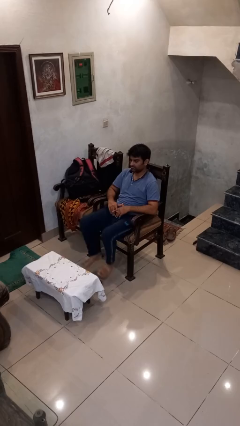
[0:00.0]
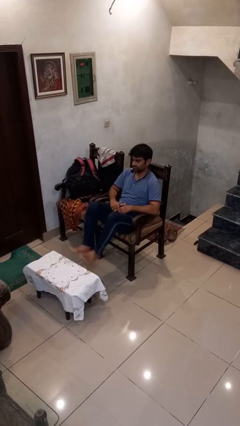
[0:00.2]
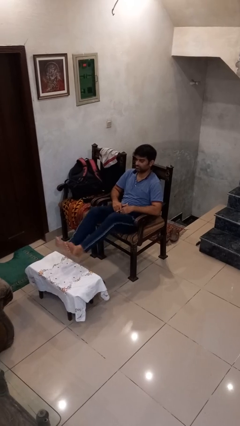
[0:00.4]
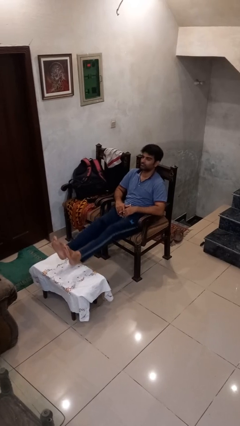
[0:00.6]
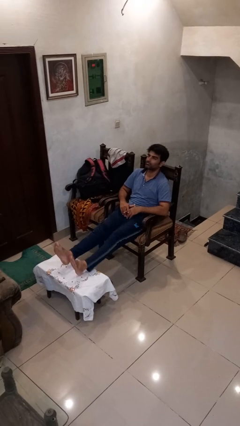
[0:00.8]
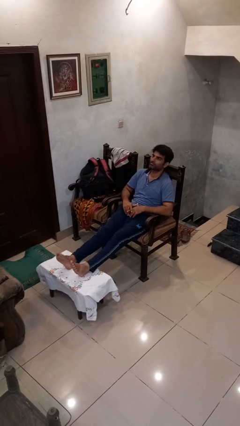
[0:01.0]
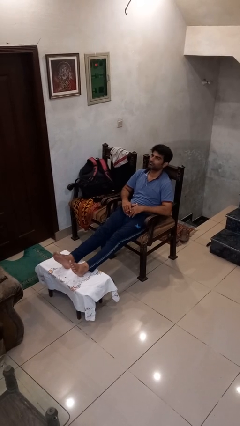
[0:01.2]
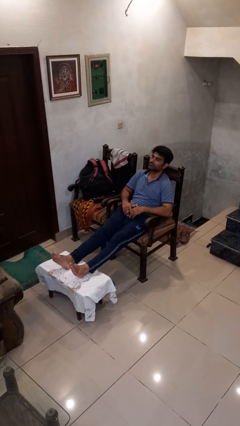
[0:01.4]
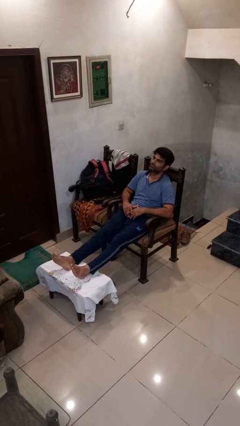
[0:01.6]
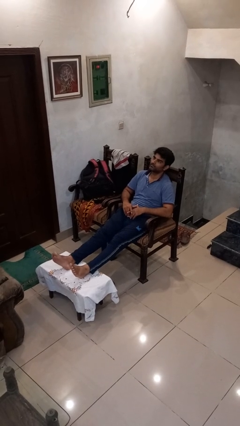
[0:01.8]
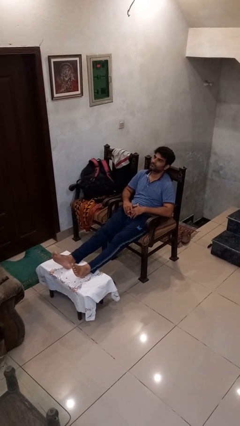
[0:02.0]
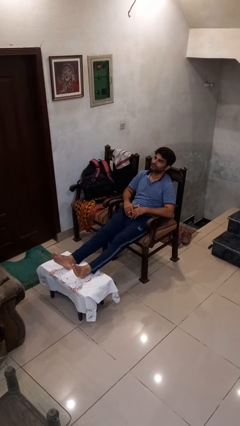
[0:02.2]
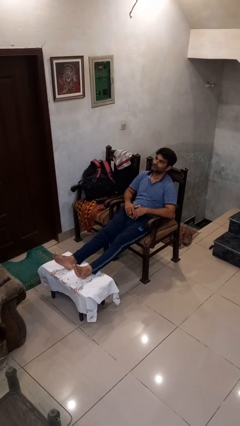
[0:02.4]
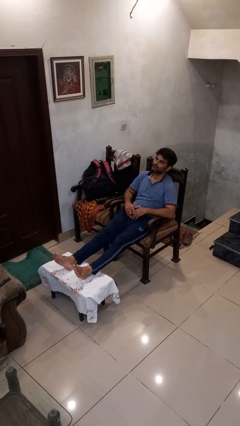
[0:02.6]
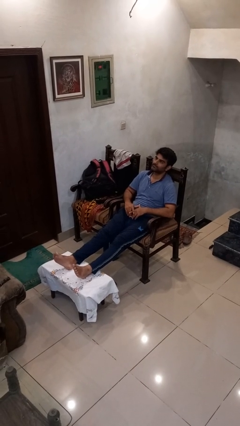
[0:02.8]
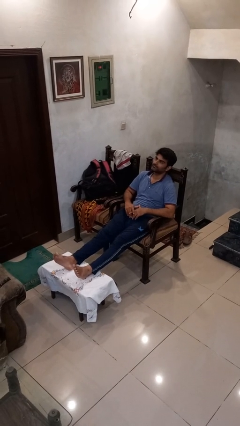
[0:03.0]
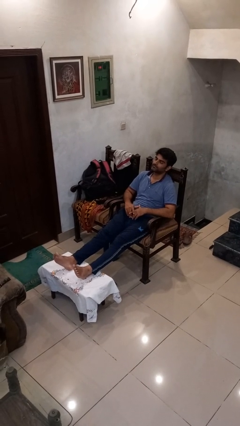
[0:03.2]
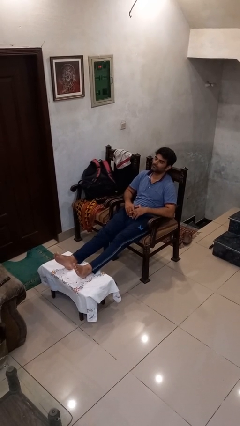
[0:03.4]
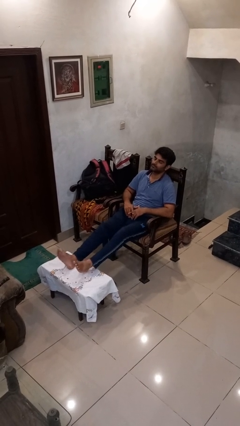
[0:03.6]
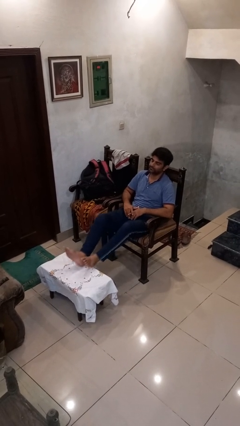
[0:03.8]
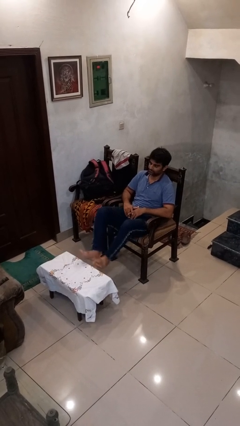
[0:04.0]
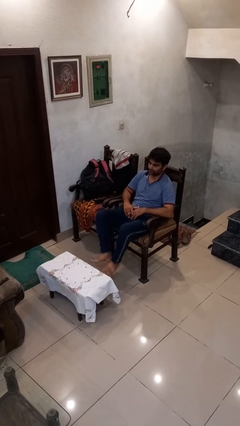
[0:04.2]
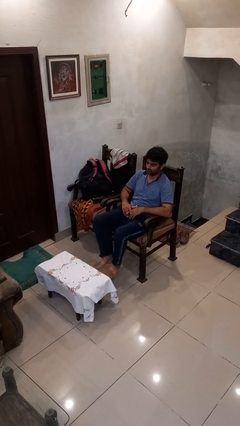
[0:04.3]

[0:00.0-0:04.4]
person puts feet up

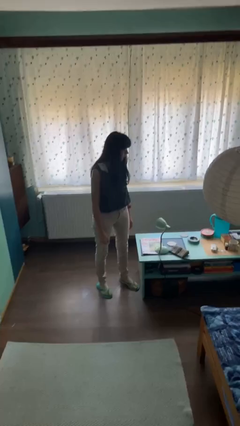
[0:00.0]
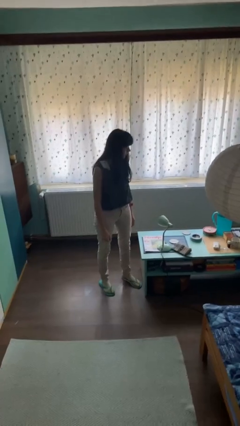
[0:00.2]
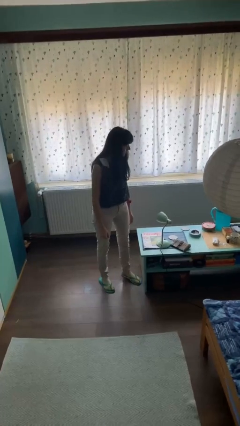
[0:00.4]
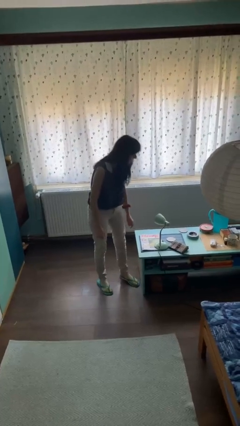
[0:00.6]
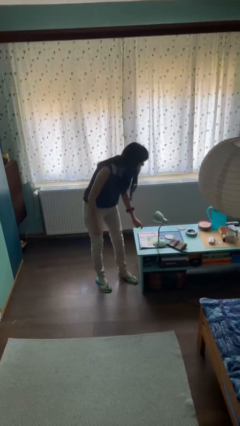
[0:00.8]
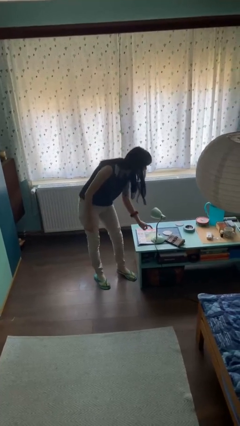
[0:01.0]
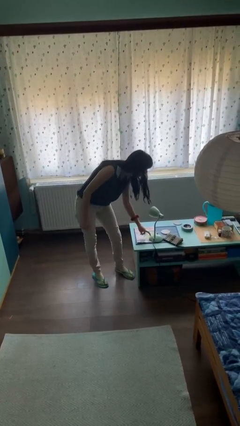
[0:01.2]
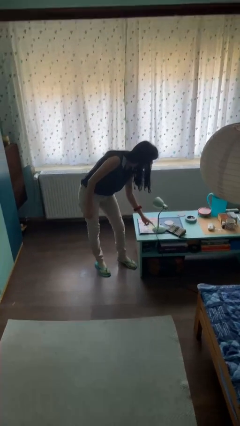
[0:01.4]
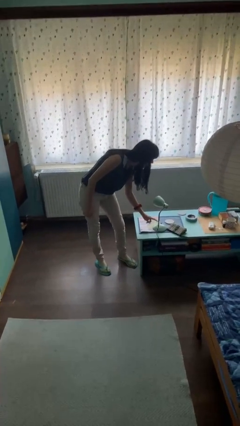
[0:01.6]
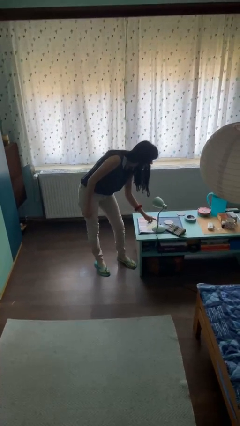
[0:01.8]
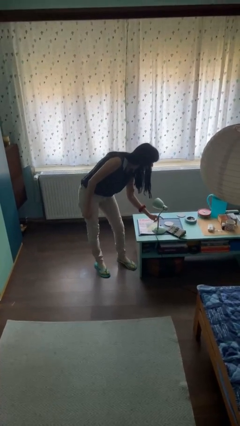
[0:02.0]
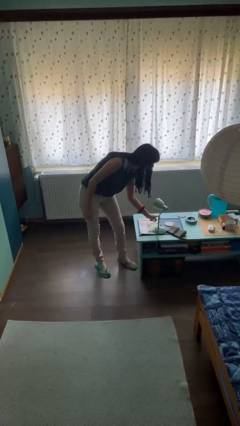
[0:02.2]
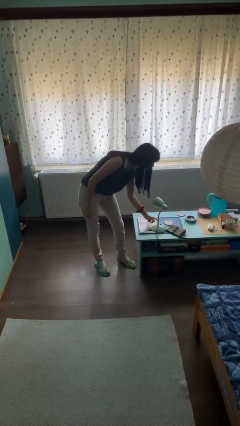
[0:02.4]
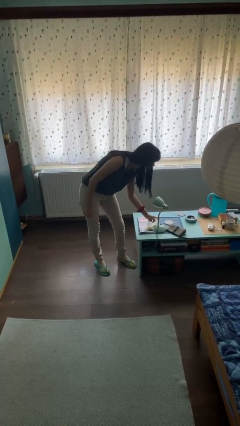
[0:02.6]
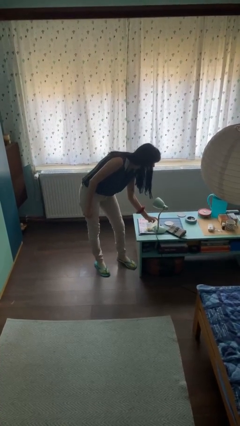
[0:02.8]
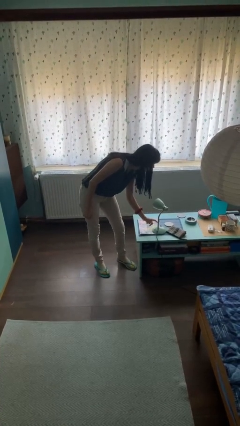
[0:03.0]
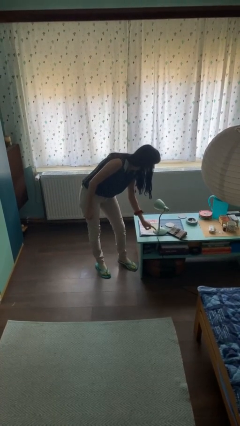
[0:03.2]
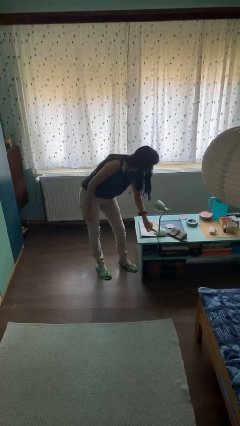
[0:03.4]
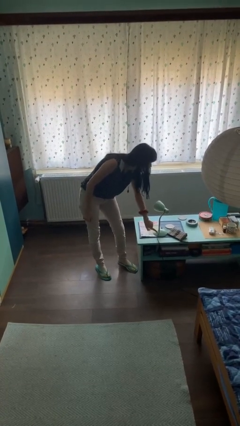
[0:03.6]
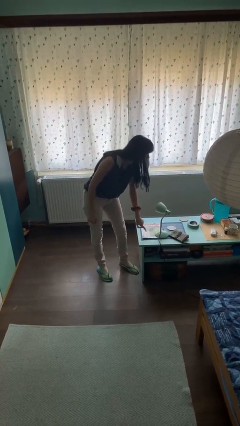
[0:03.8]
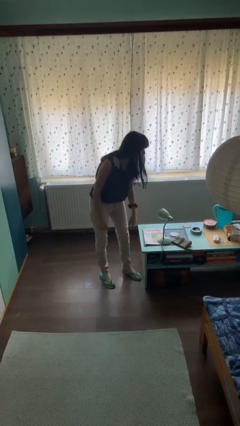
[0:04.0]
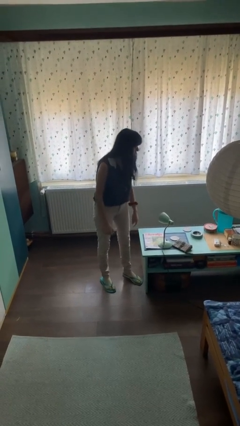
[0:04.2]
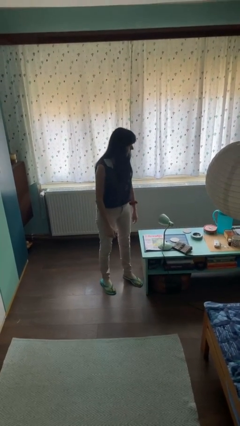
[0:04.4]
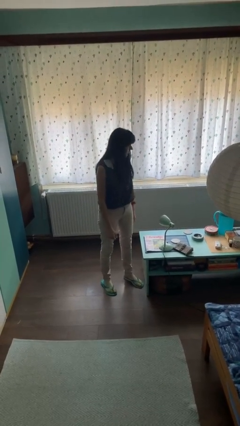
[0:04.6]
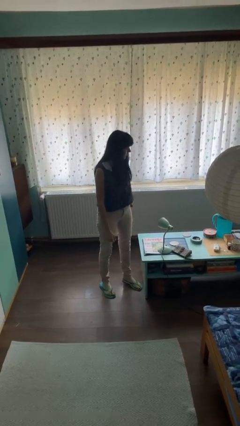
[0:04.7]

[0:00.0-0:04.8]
person taps object with finger

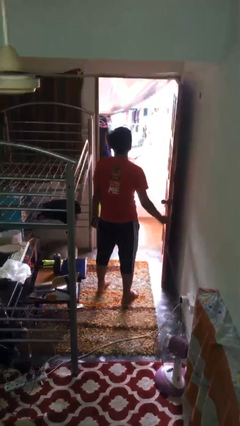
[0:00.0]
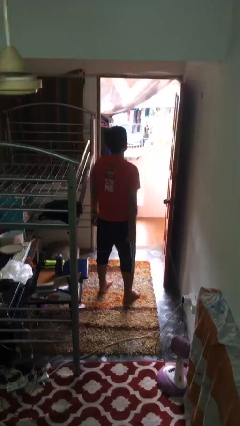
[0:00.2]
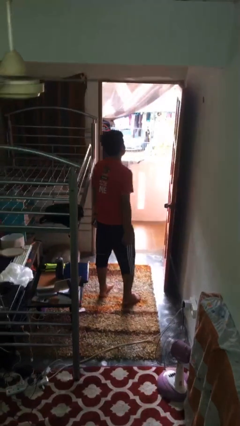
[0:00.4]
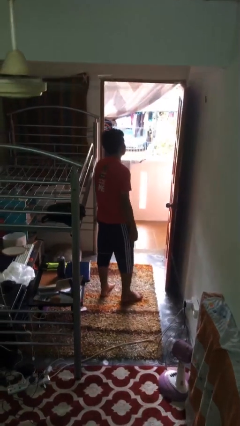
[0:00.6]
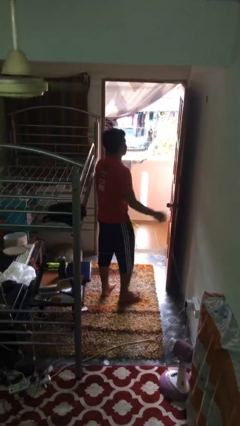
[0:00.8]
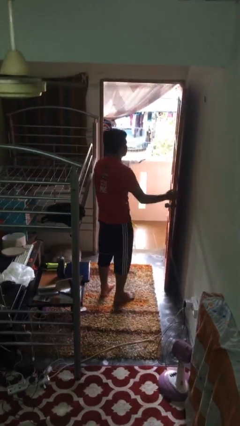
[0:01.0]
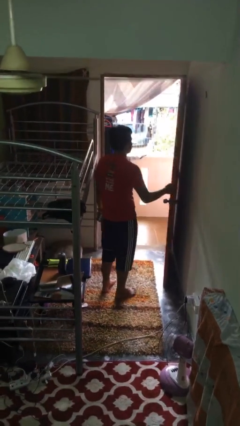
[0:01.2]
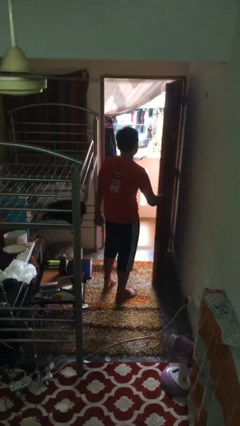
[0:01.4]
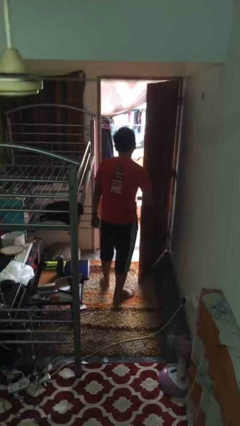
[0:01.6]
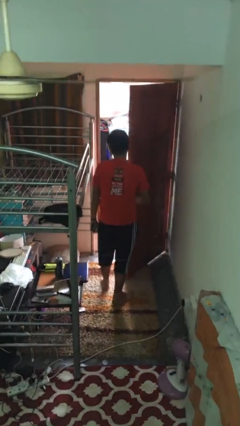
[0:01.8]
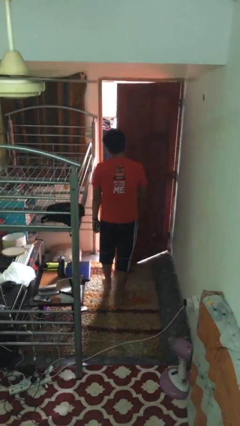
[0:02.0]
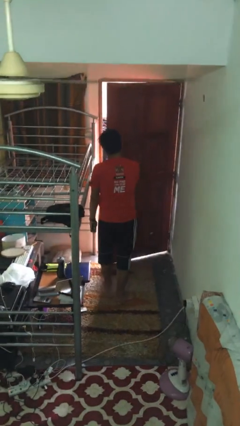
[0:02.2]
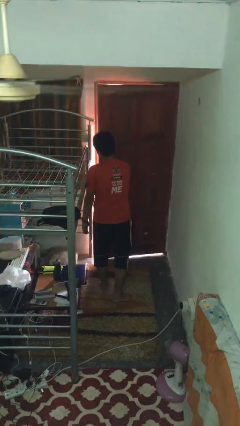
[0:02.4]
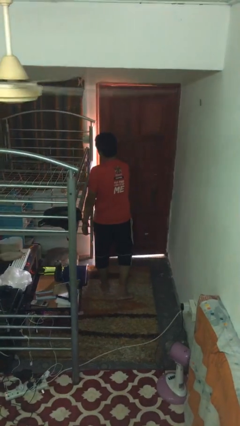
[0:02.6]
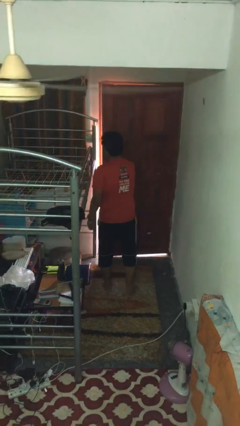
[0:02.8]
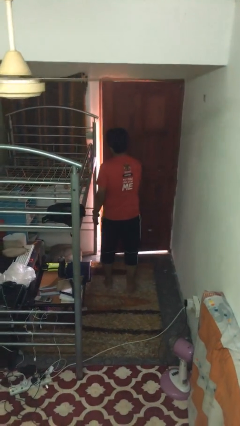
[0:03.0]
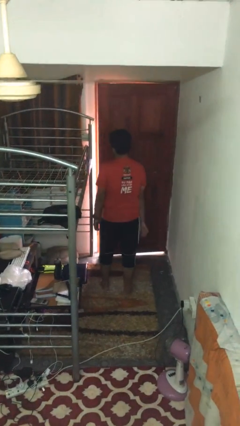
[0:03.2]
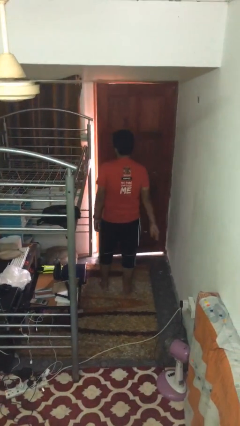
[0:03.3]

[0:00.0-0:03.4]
person closes facility door

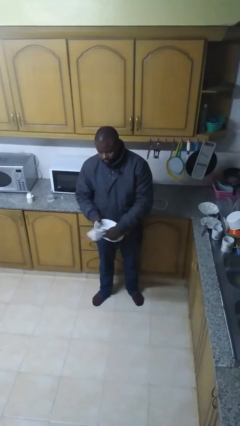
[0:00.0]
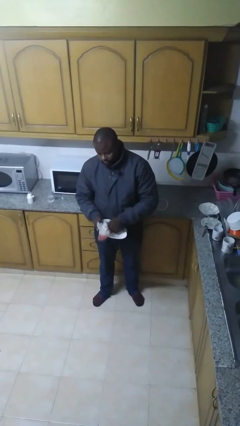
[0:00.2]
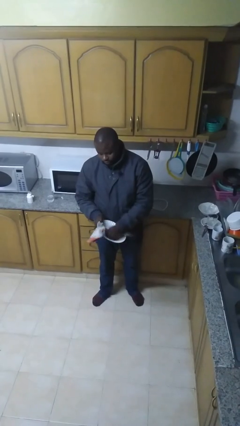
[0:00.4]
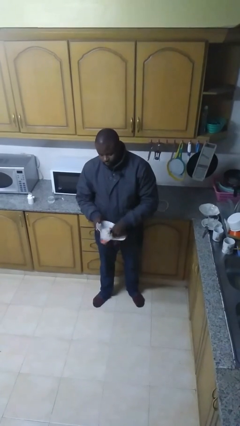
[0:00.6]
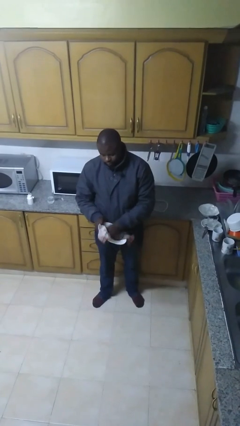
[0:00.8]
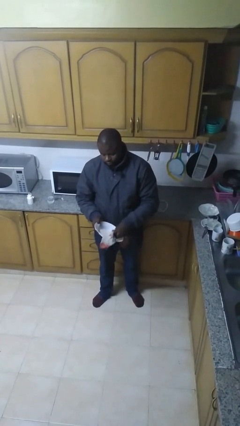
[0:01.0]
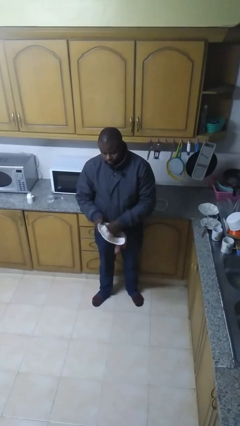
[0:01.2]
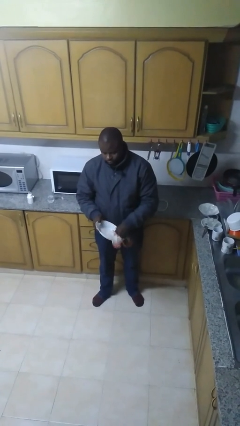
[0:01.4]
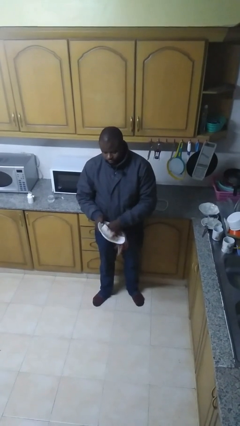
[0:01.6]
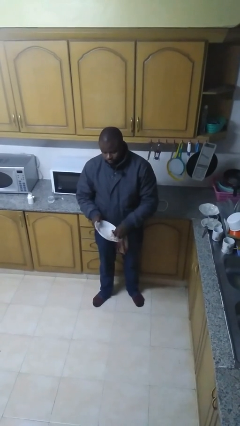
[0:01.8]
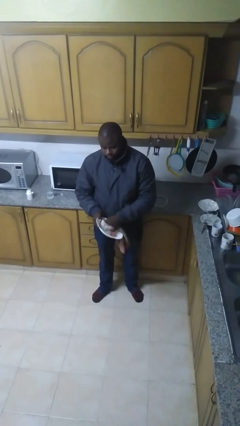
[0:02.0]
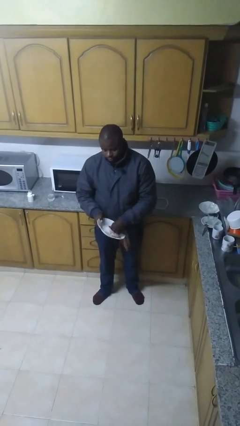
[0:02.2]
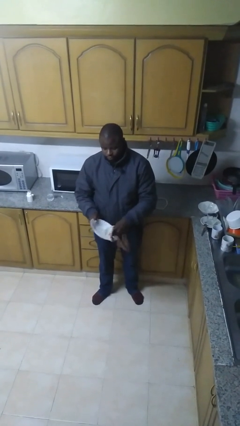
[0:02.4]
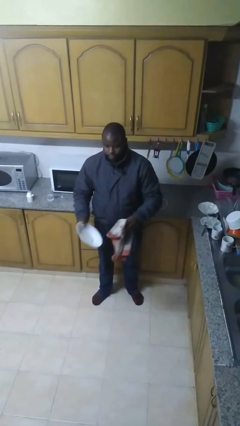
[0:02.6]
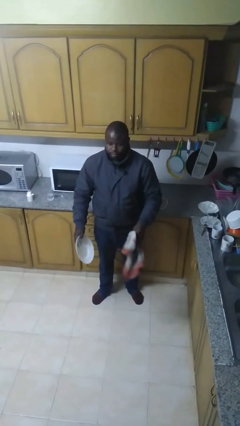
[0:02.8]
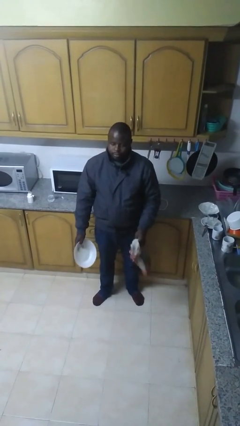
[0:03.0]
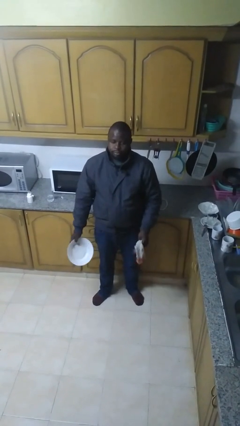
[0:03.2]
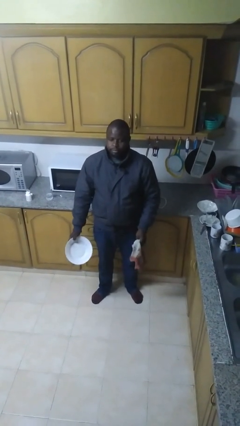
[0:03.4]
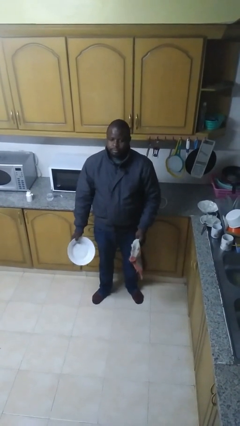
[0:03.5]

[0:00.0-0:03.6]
person dries dish

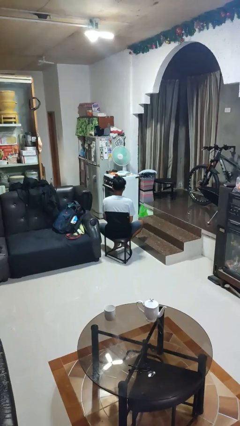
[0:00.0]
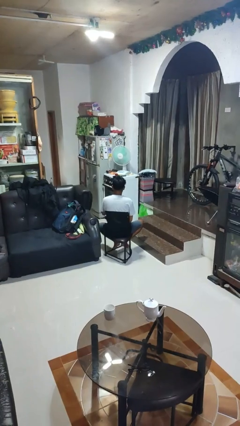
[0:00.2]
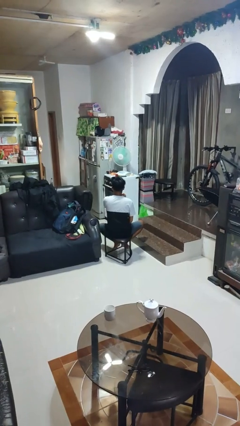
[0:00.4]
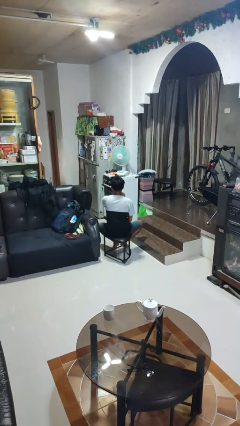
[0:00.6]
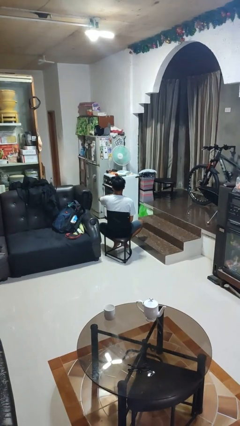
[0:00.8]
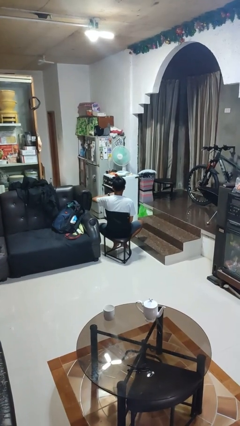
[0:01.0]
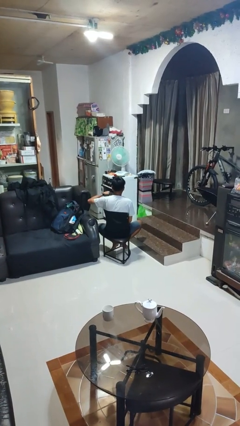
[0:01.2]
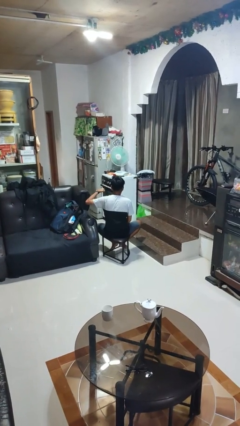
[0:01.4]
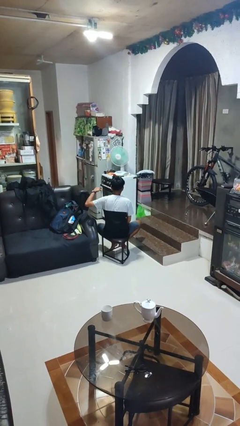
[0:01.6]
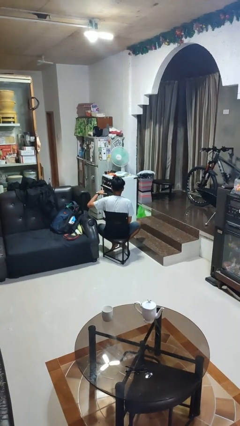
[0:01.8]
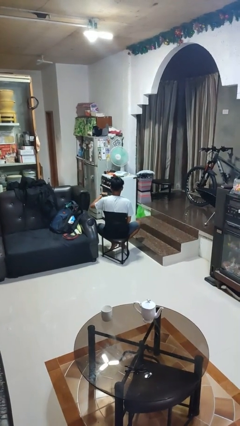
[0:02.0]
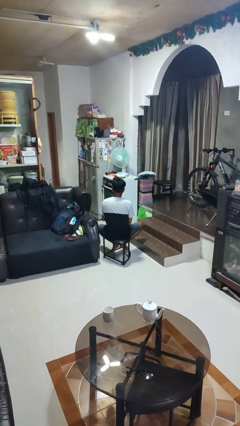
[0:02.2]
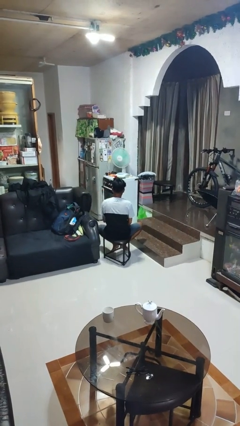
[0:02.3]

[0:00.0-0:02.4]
person gestures cut
